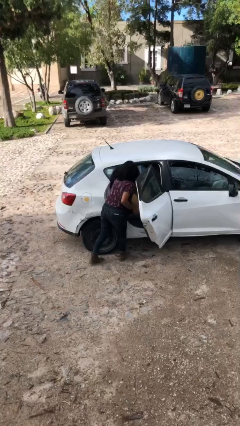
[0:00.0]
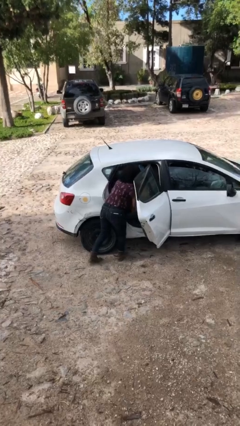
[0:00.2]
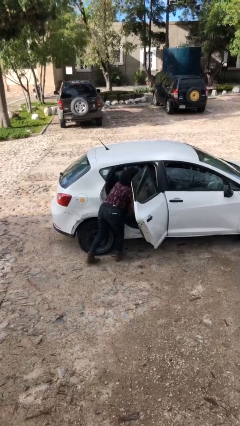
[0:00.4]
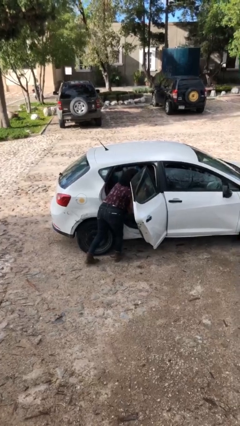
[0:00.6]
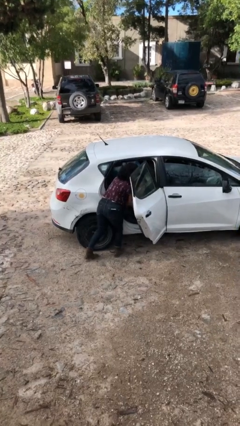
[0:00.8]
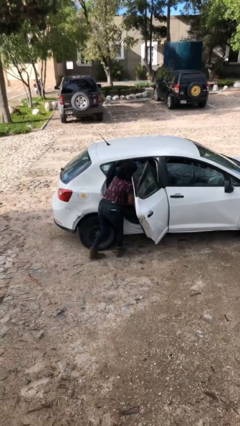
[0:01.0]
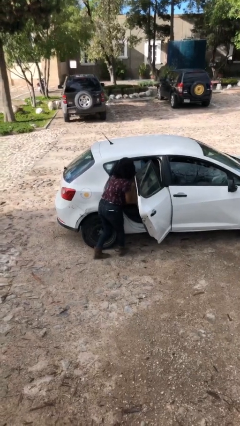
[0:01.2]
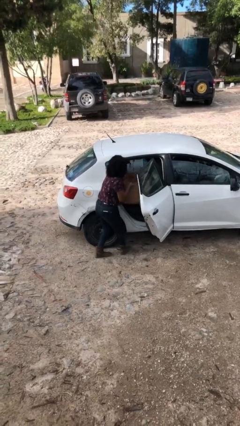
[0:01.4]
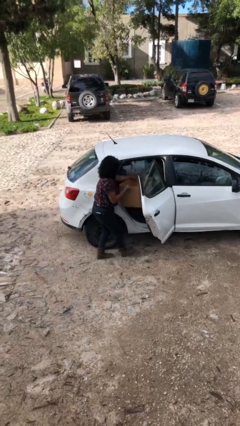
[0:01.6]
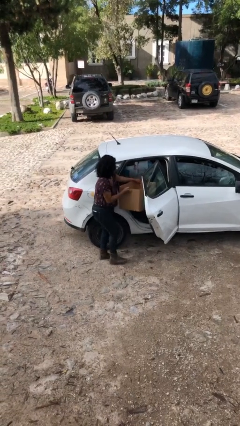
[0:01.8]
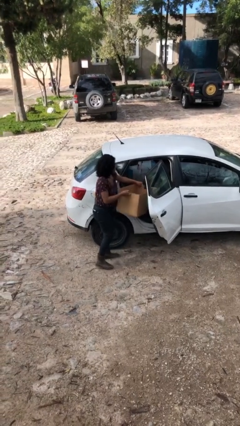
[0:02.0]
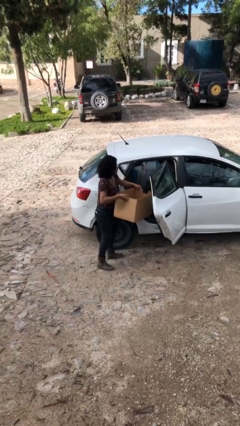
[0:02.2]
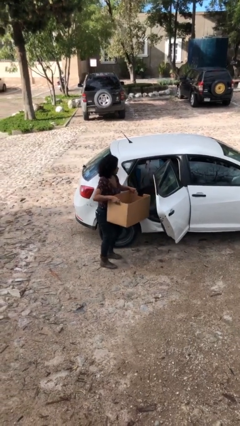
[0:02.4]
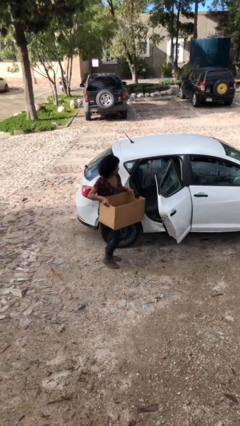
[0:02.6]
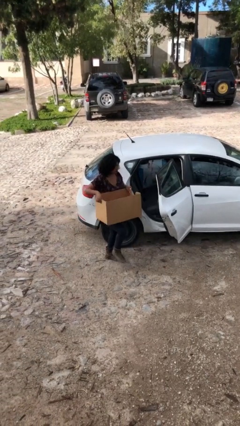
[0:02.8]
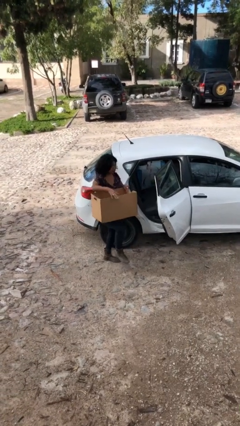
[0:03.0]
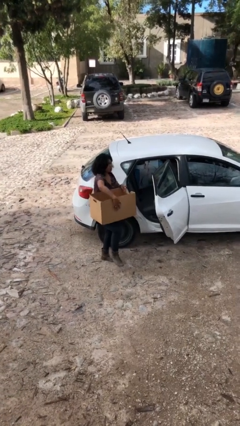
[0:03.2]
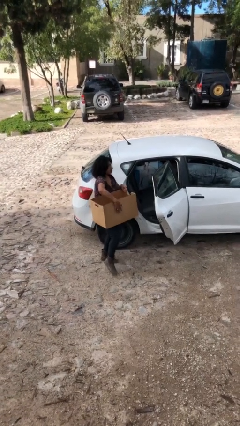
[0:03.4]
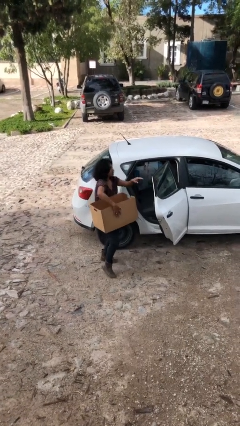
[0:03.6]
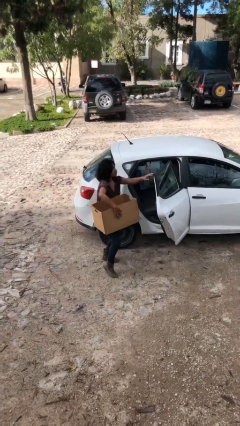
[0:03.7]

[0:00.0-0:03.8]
person unloads car

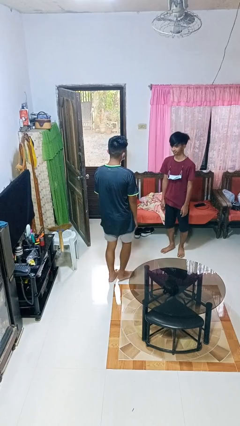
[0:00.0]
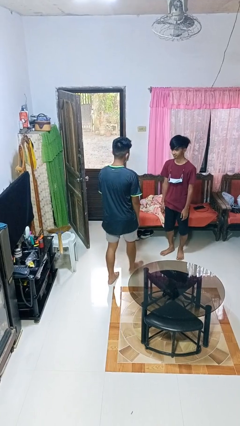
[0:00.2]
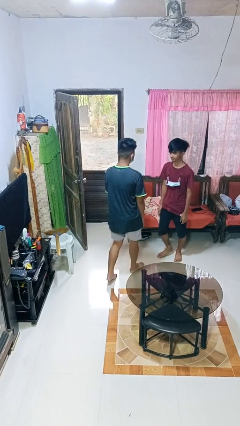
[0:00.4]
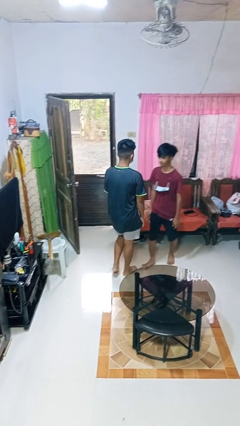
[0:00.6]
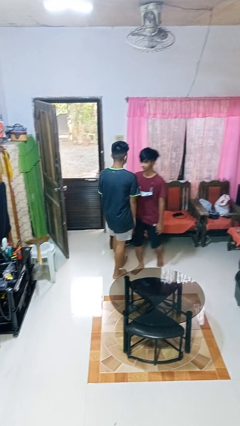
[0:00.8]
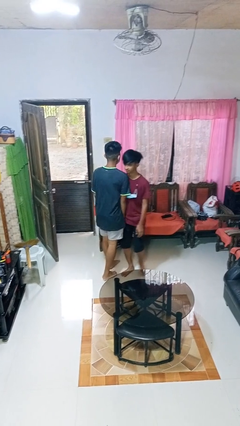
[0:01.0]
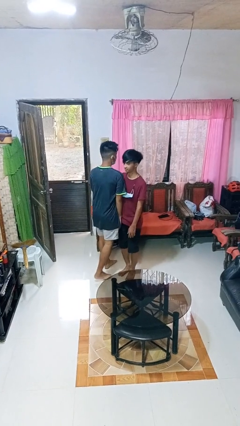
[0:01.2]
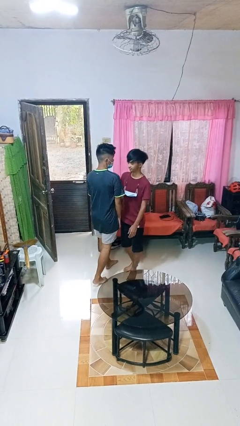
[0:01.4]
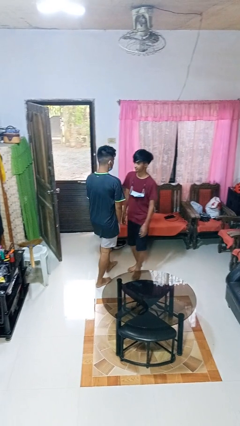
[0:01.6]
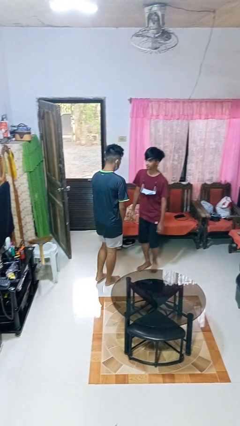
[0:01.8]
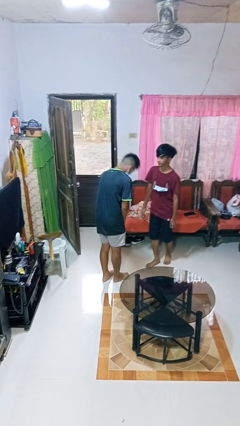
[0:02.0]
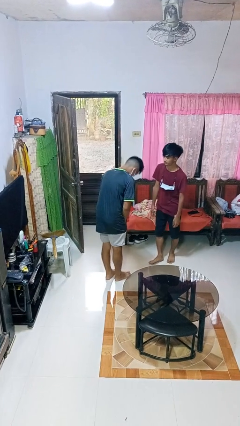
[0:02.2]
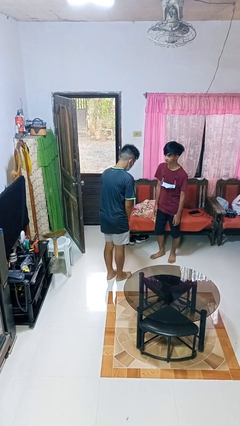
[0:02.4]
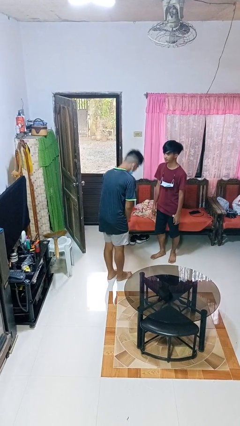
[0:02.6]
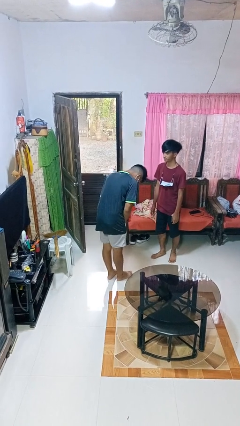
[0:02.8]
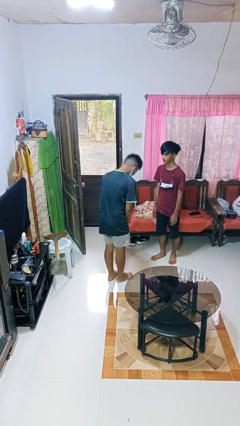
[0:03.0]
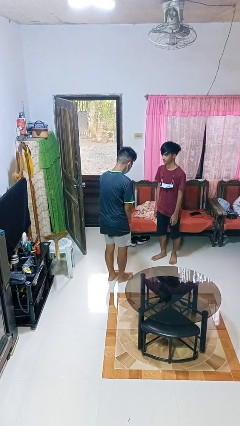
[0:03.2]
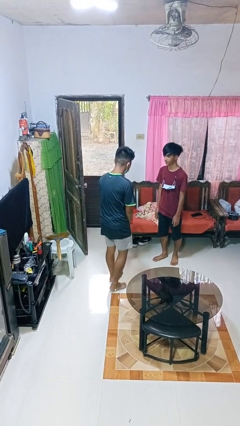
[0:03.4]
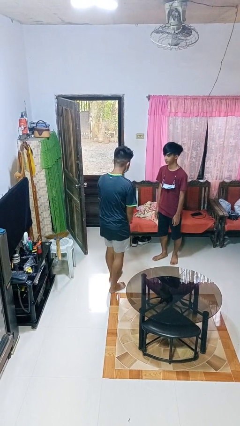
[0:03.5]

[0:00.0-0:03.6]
person bumps into person

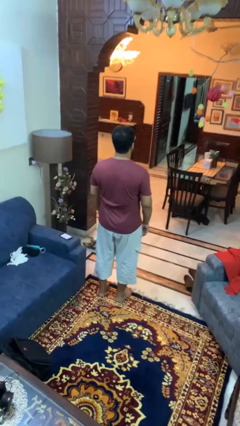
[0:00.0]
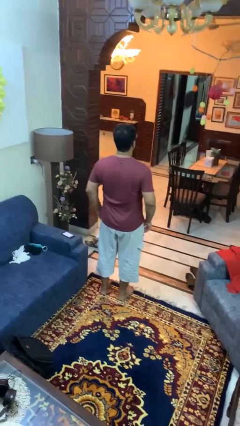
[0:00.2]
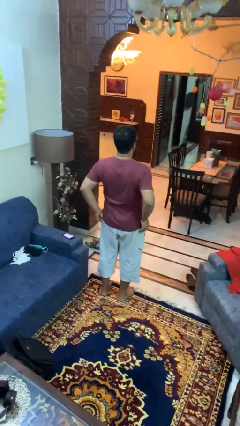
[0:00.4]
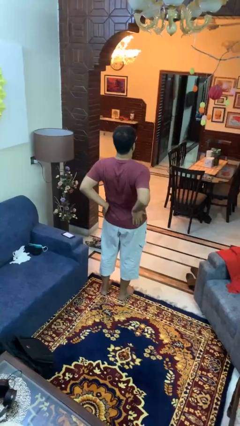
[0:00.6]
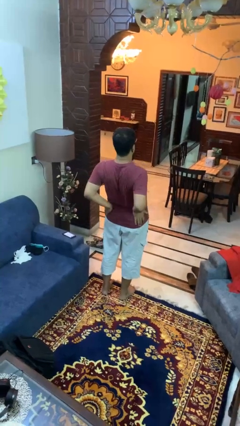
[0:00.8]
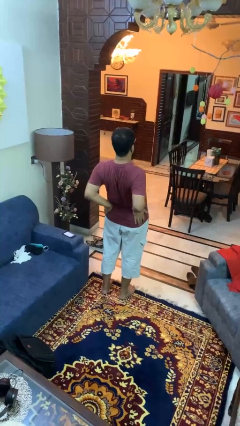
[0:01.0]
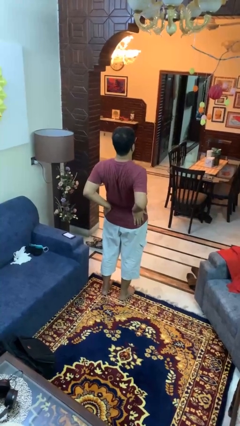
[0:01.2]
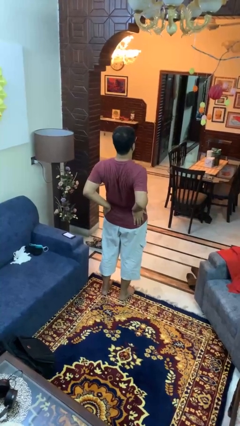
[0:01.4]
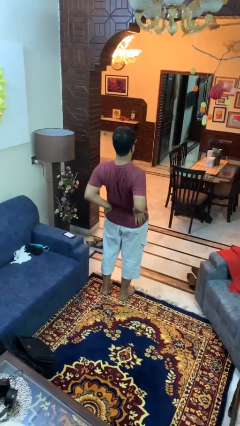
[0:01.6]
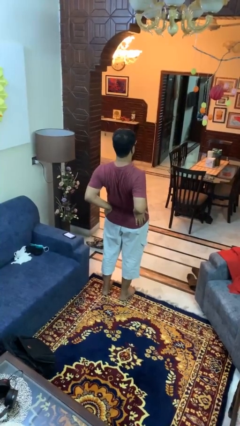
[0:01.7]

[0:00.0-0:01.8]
person stretches back

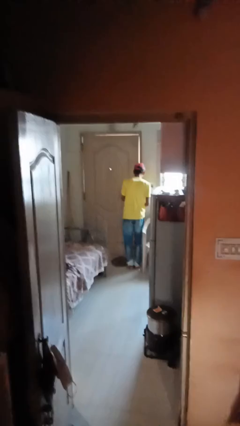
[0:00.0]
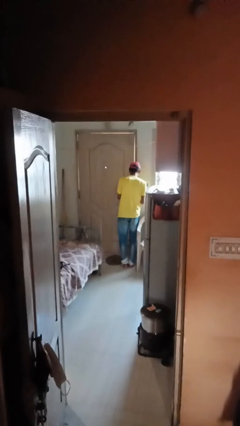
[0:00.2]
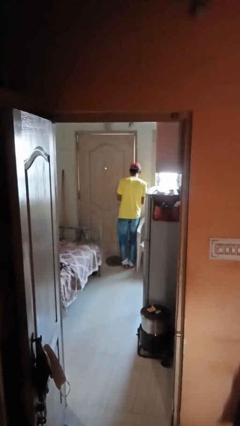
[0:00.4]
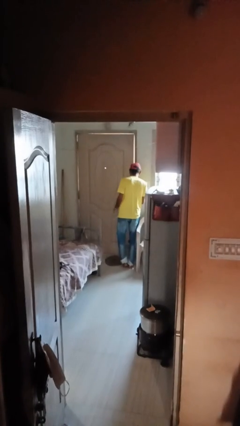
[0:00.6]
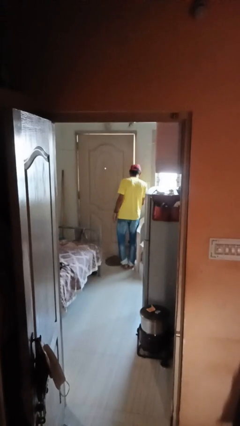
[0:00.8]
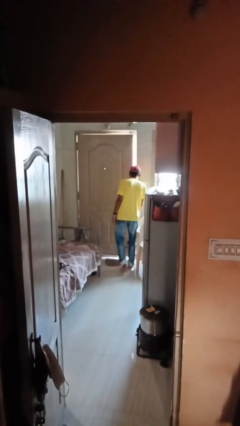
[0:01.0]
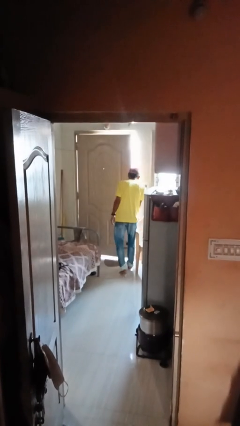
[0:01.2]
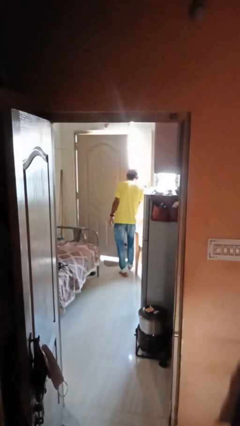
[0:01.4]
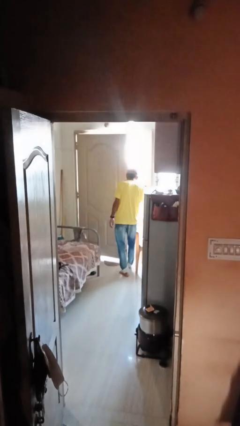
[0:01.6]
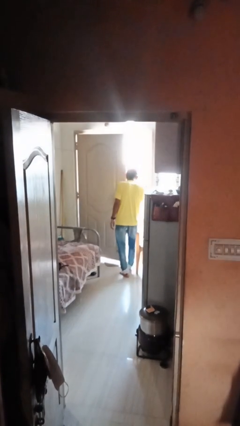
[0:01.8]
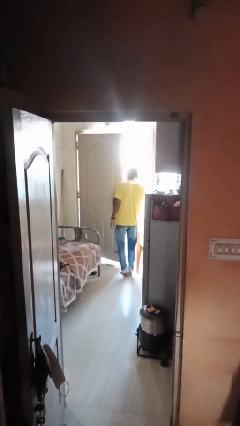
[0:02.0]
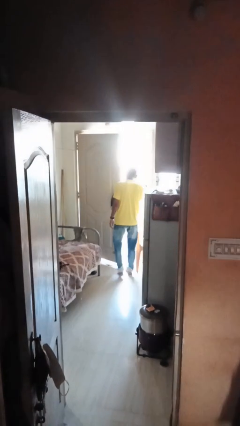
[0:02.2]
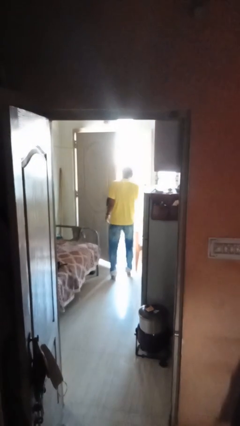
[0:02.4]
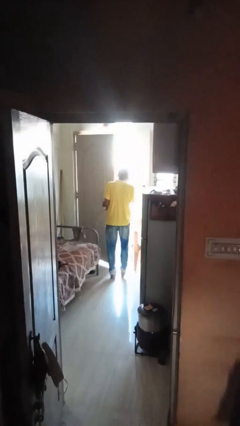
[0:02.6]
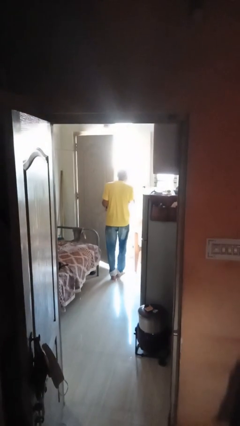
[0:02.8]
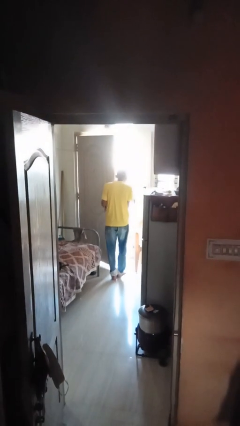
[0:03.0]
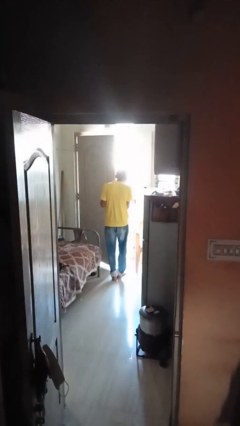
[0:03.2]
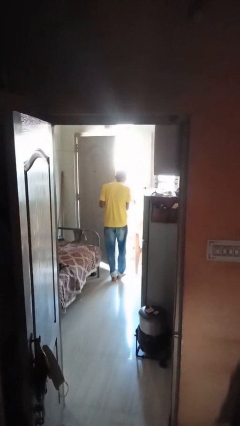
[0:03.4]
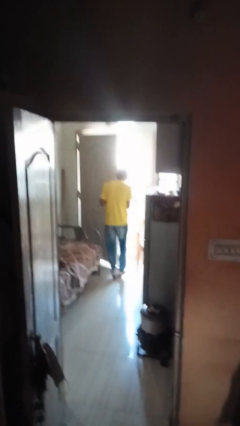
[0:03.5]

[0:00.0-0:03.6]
person opens facility door

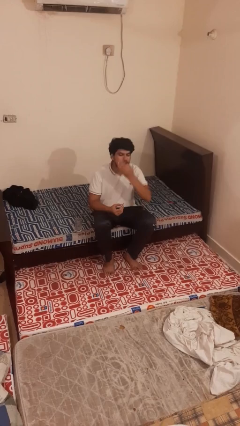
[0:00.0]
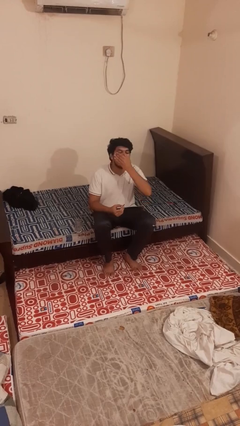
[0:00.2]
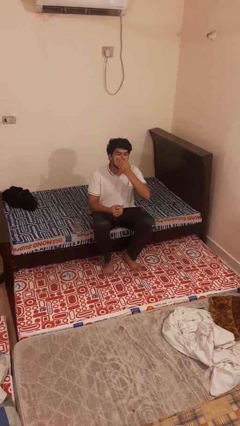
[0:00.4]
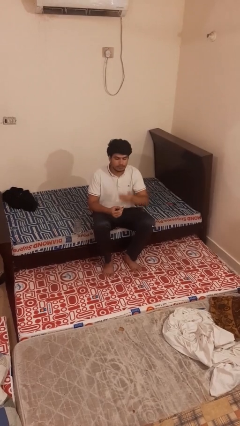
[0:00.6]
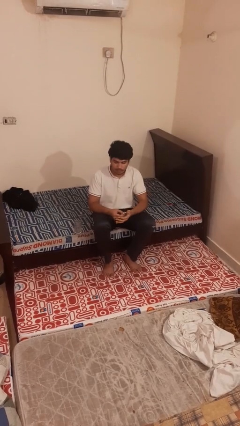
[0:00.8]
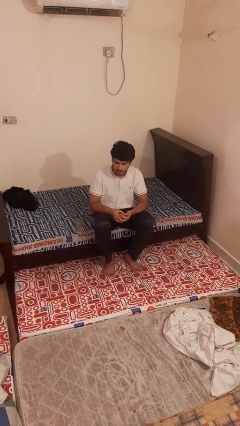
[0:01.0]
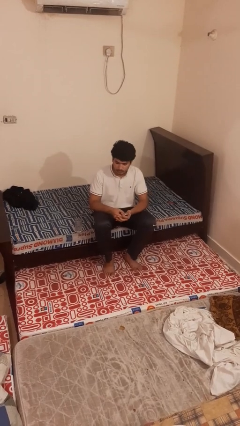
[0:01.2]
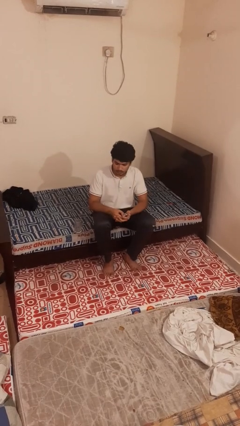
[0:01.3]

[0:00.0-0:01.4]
person takes medicine pills

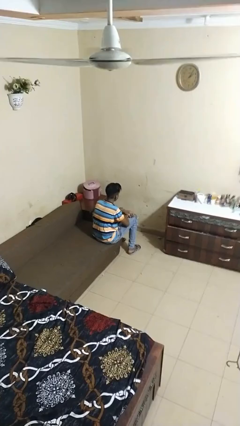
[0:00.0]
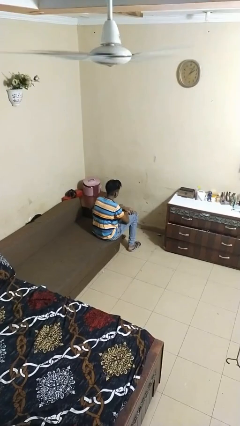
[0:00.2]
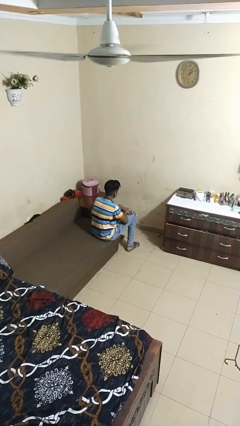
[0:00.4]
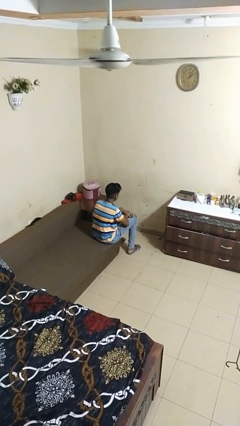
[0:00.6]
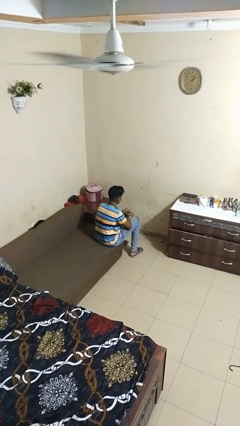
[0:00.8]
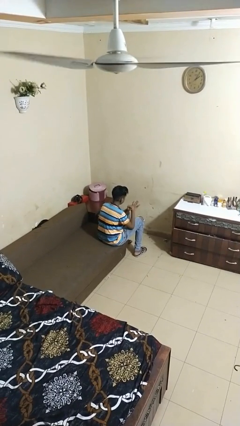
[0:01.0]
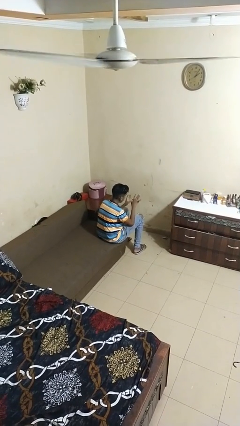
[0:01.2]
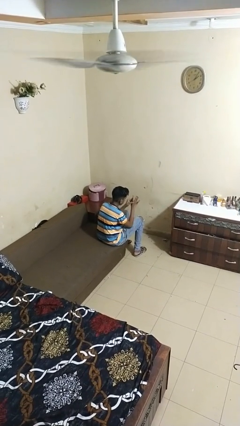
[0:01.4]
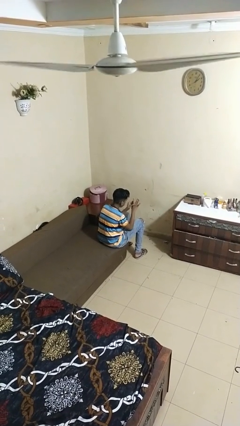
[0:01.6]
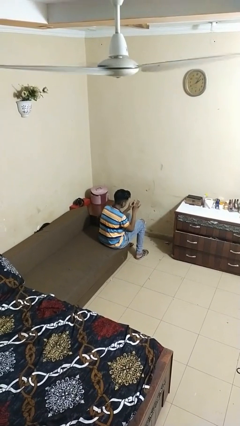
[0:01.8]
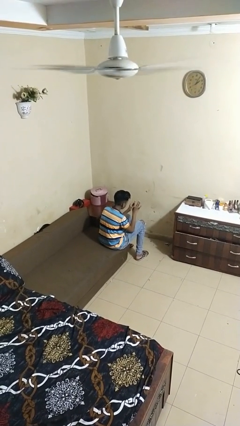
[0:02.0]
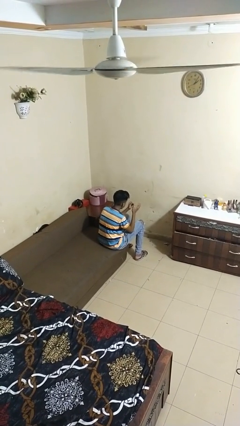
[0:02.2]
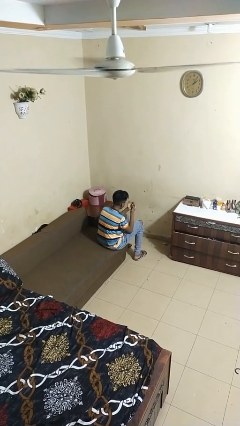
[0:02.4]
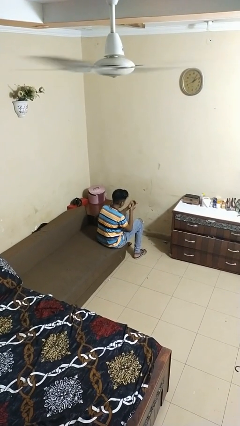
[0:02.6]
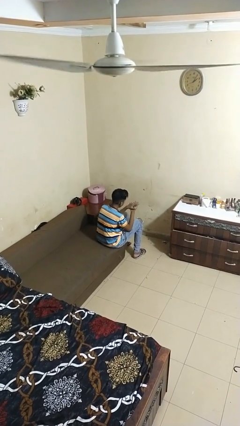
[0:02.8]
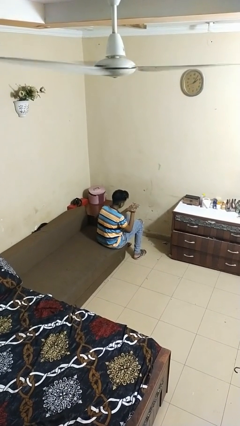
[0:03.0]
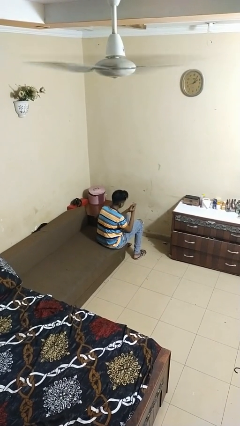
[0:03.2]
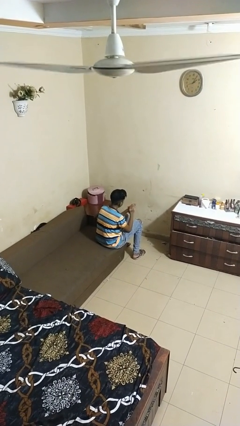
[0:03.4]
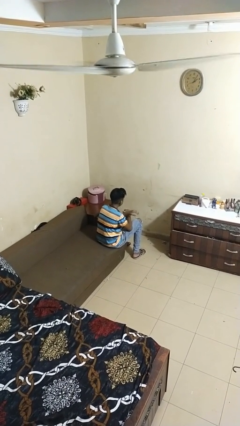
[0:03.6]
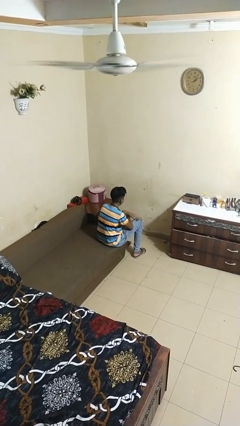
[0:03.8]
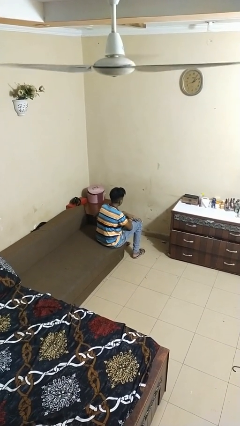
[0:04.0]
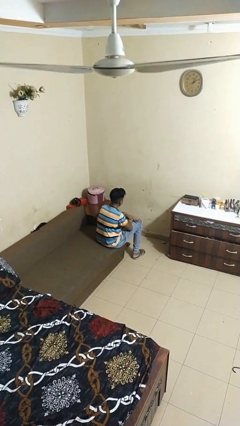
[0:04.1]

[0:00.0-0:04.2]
person looks at hands in lap
